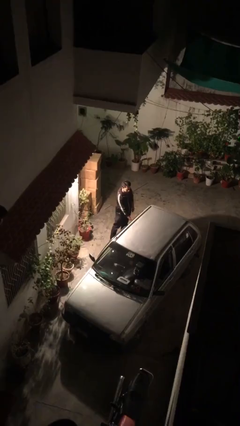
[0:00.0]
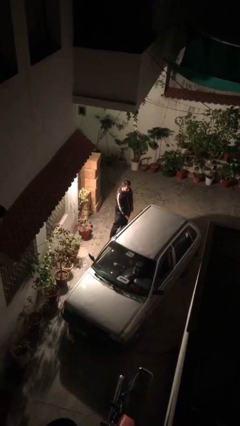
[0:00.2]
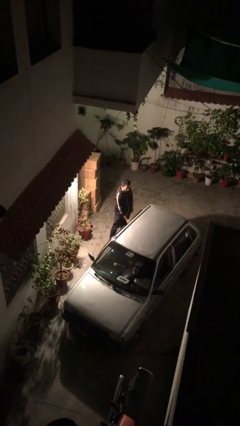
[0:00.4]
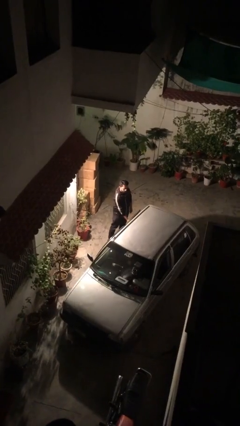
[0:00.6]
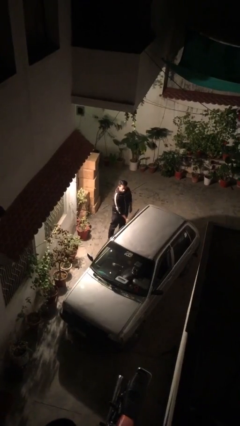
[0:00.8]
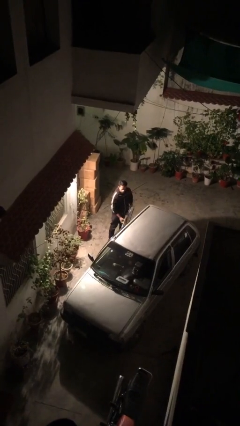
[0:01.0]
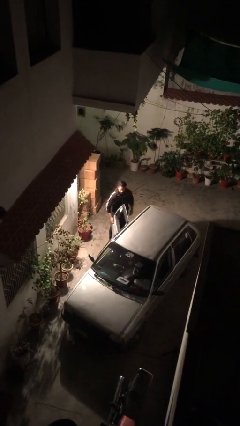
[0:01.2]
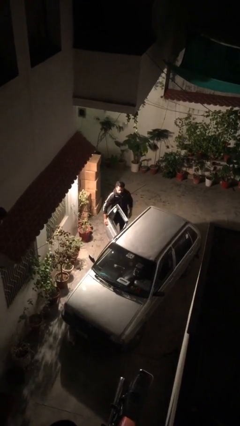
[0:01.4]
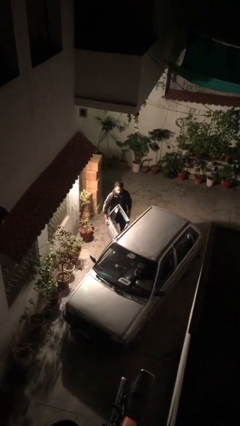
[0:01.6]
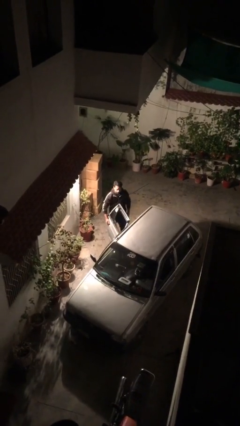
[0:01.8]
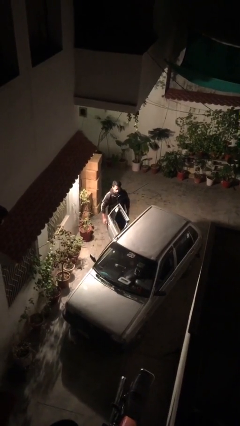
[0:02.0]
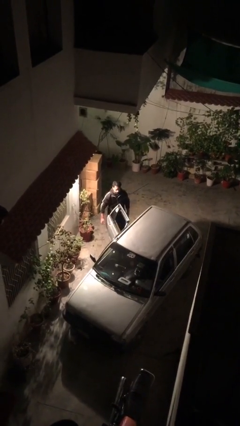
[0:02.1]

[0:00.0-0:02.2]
person opens car door

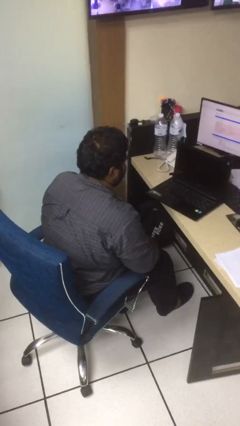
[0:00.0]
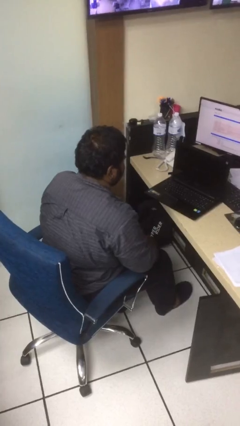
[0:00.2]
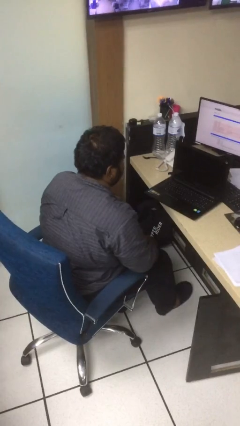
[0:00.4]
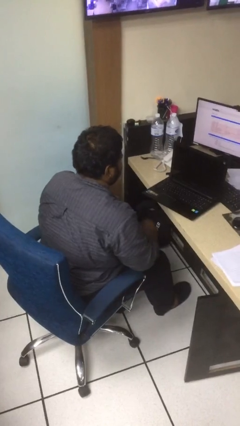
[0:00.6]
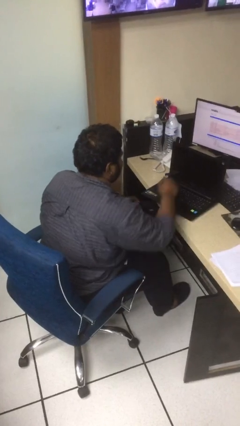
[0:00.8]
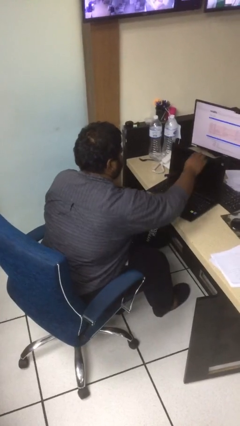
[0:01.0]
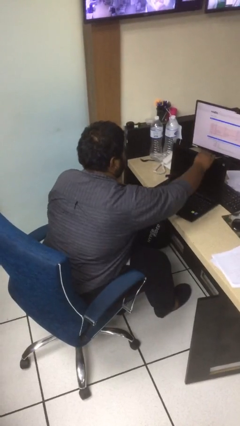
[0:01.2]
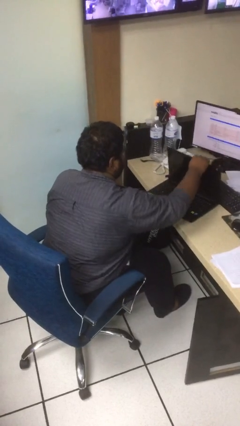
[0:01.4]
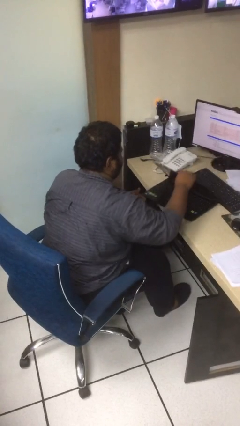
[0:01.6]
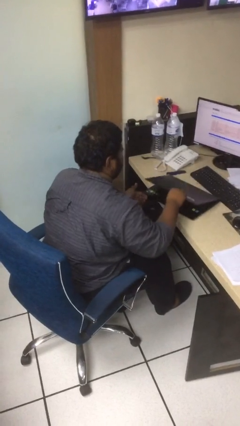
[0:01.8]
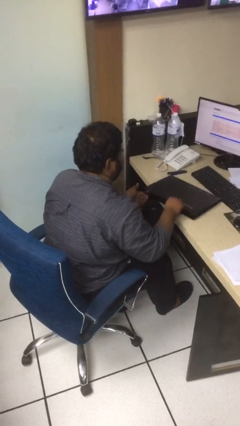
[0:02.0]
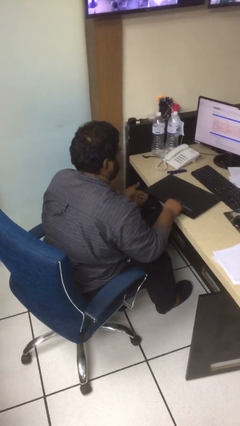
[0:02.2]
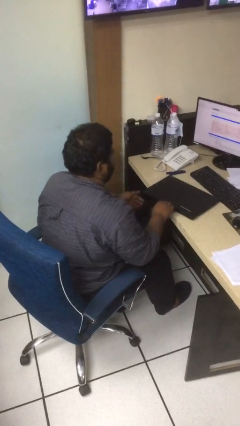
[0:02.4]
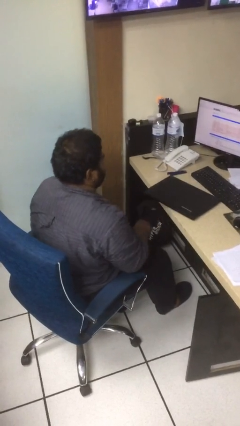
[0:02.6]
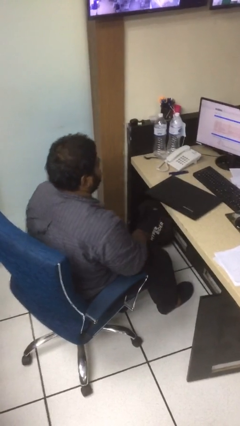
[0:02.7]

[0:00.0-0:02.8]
person closes laptop

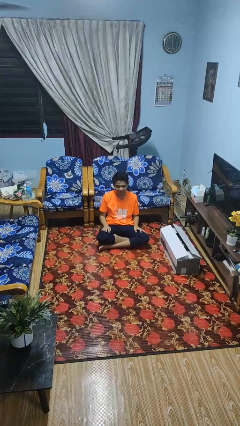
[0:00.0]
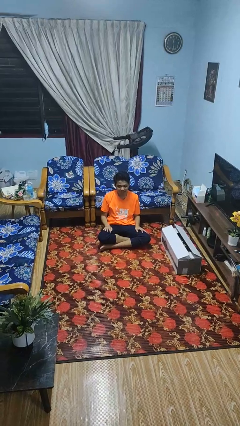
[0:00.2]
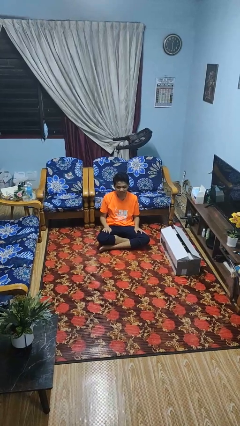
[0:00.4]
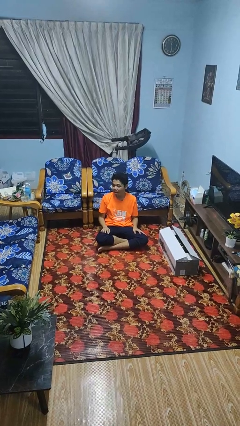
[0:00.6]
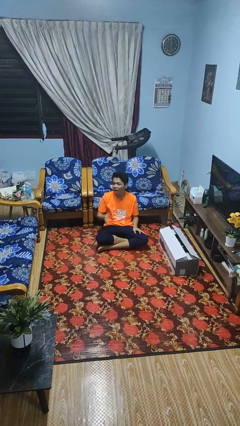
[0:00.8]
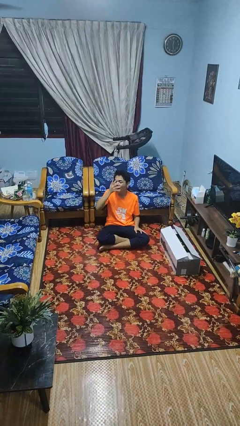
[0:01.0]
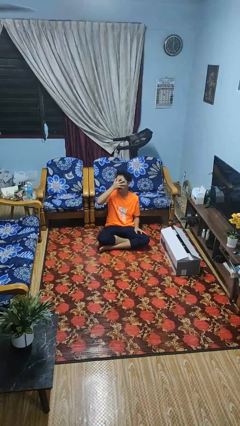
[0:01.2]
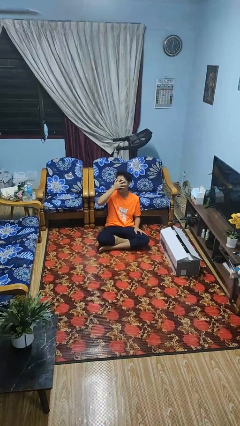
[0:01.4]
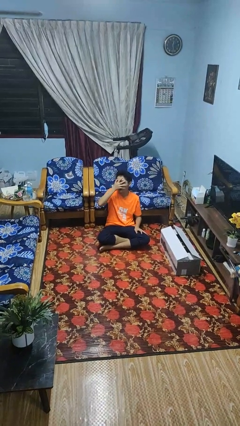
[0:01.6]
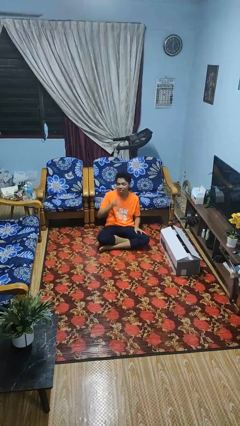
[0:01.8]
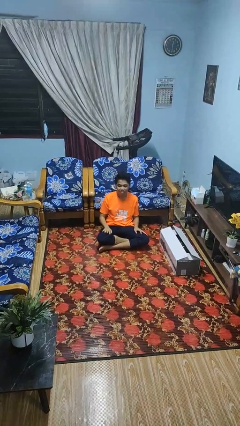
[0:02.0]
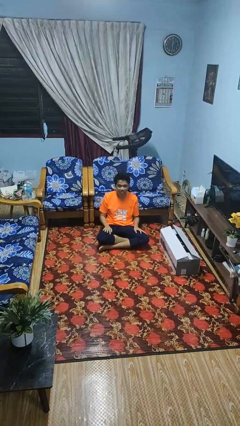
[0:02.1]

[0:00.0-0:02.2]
person covers face with hands

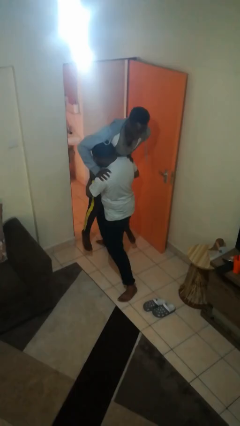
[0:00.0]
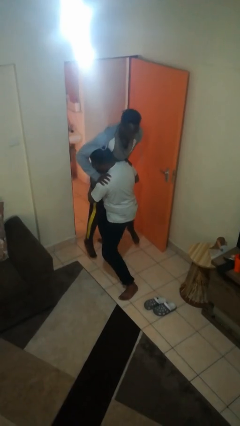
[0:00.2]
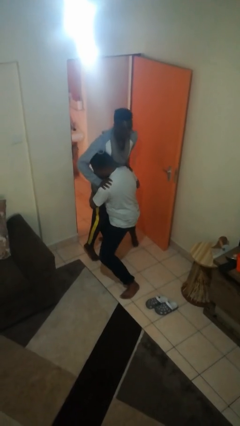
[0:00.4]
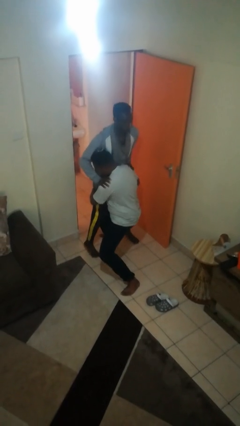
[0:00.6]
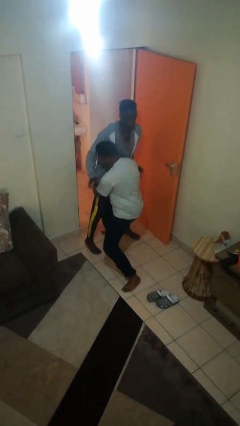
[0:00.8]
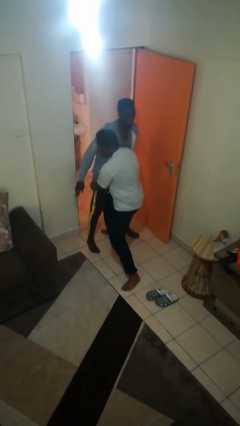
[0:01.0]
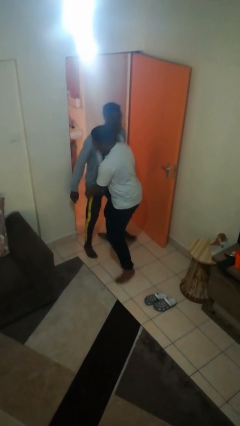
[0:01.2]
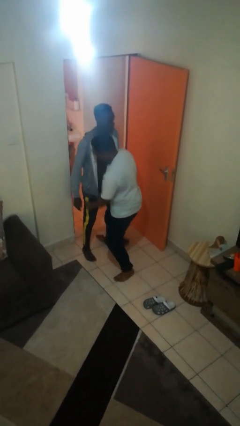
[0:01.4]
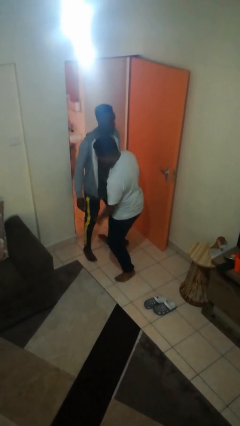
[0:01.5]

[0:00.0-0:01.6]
person puts down person

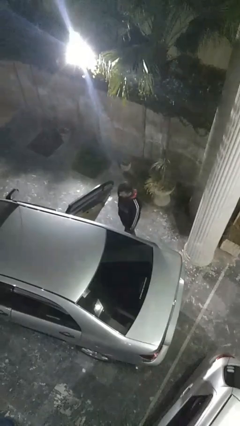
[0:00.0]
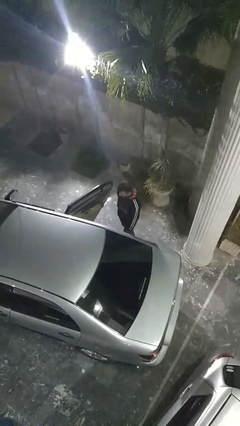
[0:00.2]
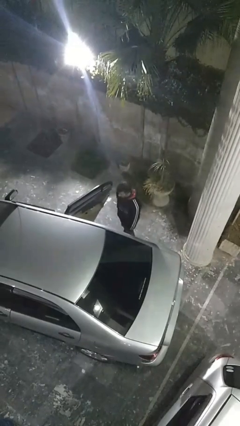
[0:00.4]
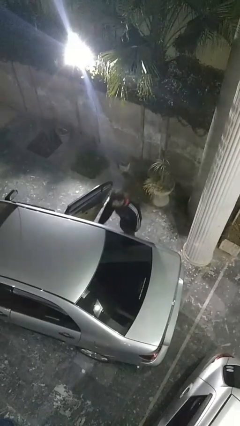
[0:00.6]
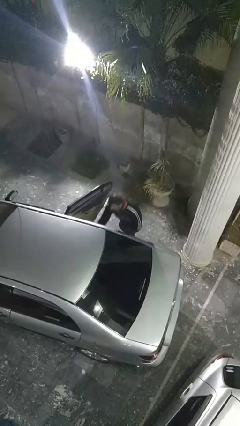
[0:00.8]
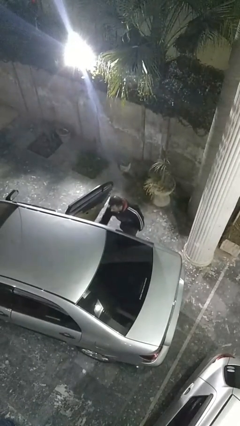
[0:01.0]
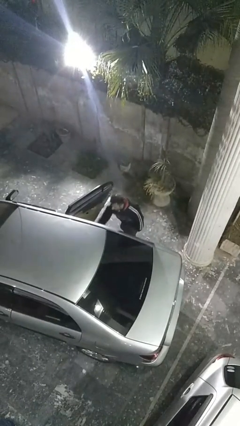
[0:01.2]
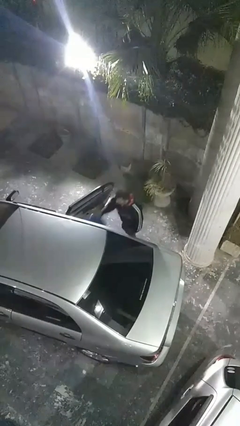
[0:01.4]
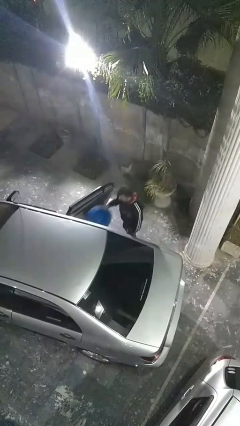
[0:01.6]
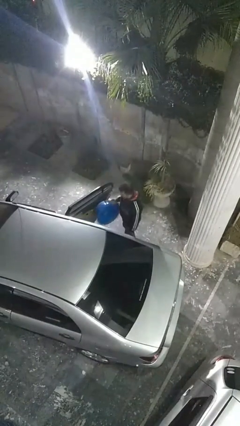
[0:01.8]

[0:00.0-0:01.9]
person unloads car

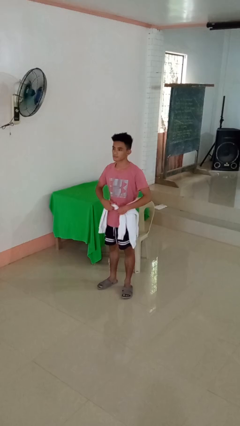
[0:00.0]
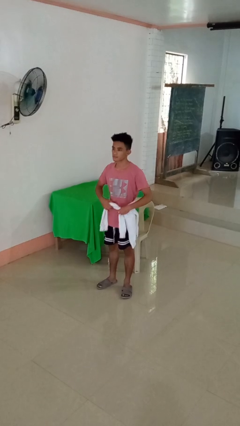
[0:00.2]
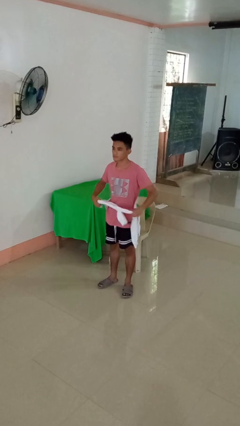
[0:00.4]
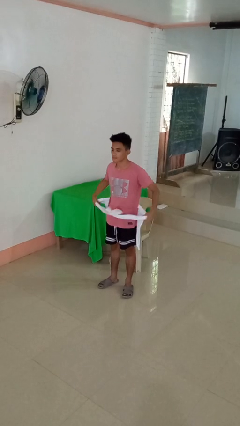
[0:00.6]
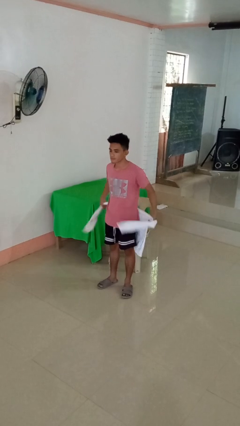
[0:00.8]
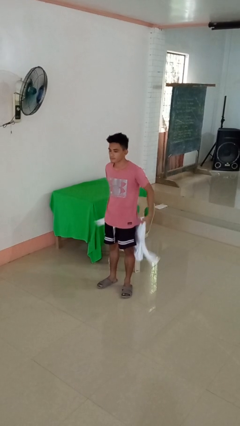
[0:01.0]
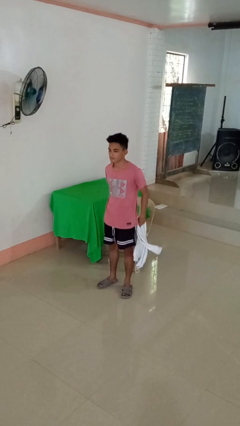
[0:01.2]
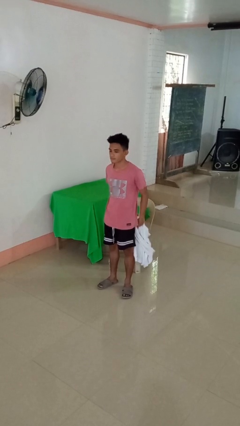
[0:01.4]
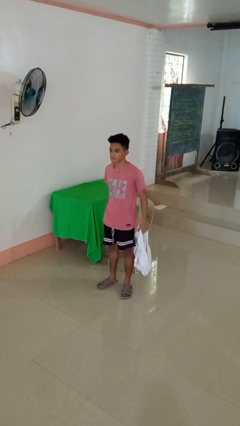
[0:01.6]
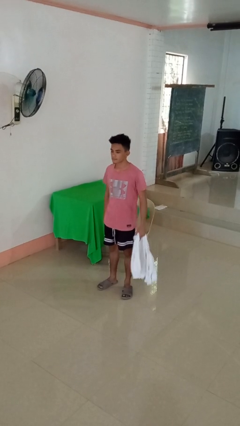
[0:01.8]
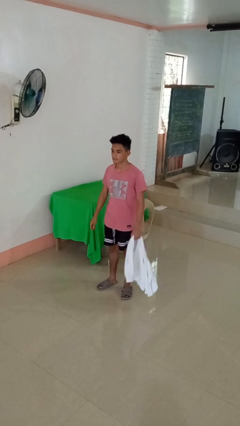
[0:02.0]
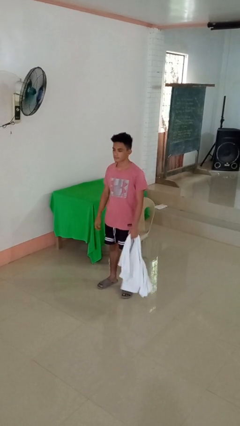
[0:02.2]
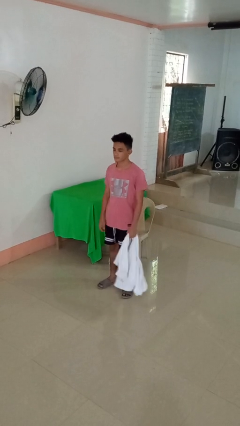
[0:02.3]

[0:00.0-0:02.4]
person unties jacket around waist

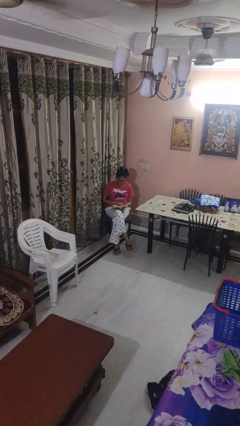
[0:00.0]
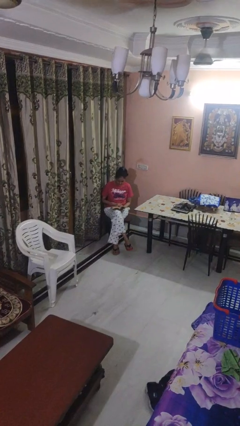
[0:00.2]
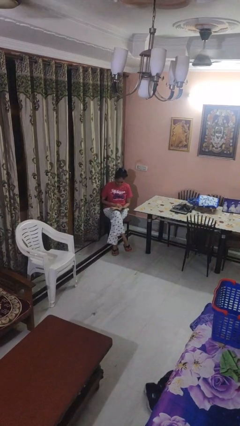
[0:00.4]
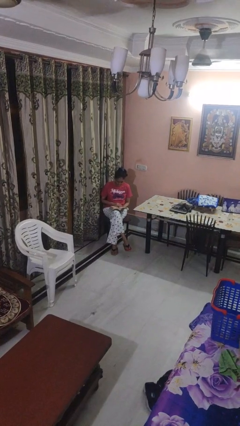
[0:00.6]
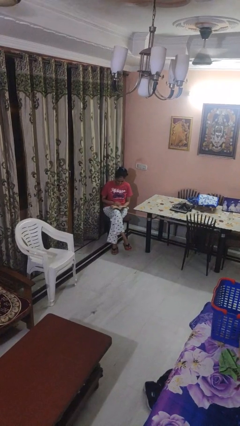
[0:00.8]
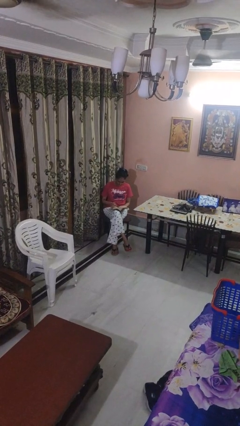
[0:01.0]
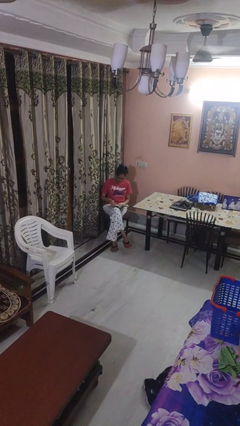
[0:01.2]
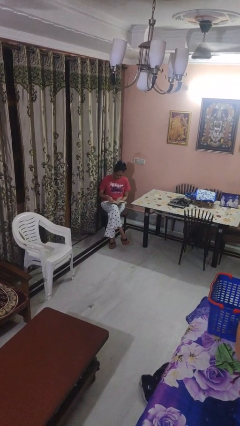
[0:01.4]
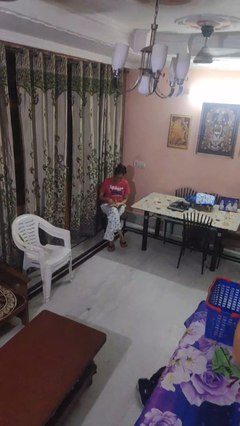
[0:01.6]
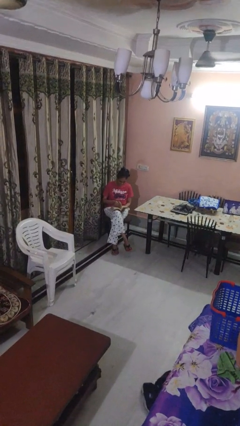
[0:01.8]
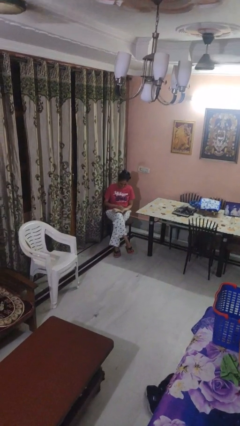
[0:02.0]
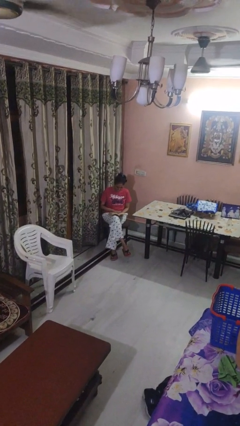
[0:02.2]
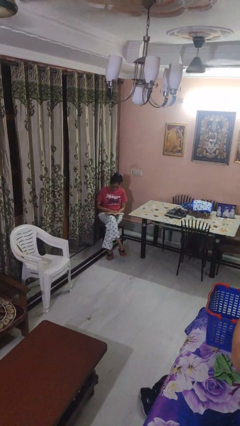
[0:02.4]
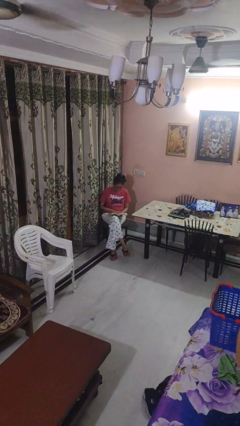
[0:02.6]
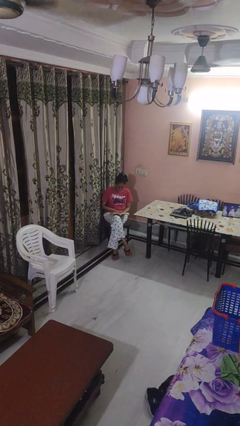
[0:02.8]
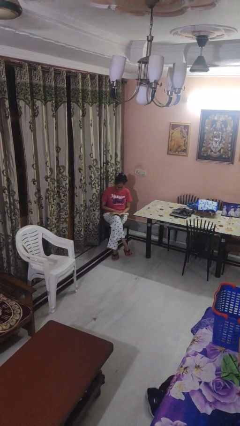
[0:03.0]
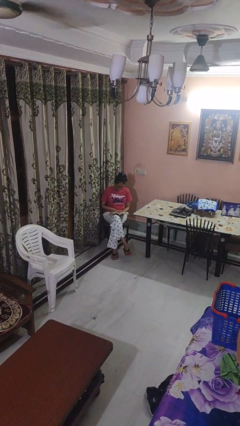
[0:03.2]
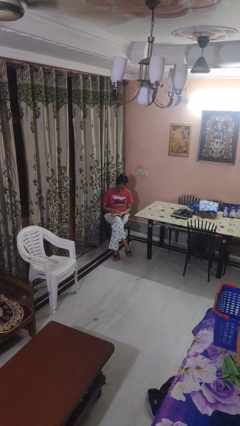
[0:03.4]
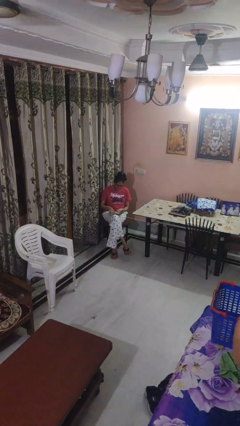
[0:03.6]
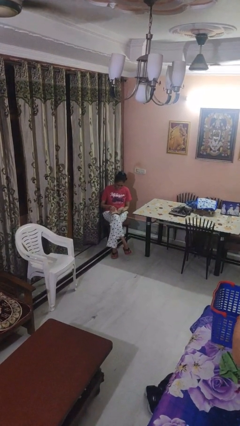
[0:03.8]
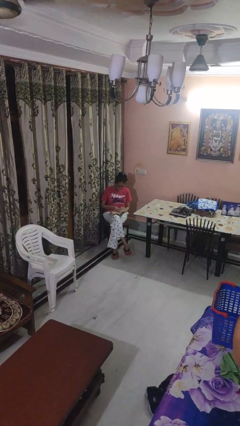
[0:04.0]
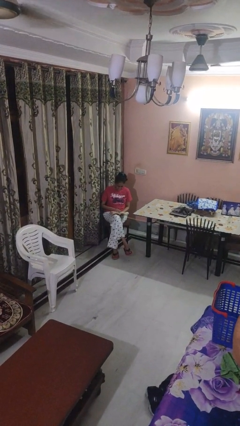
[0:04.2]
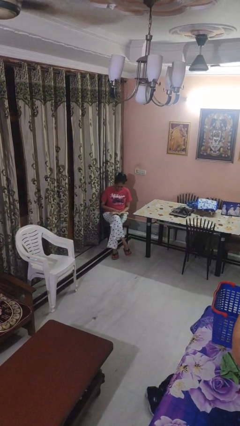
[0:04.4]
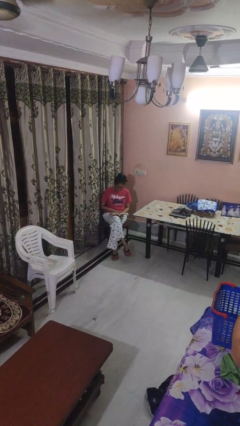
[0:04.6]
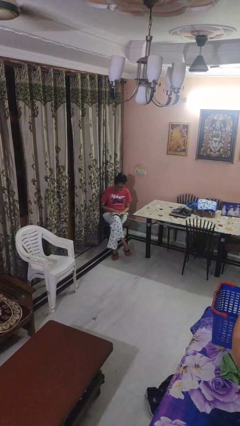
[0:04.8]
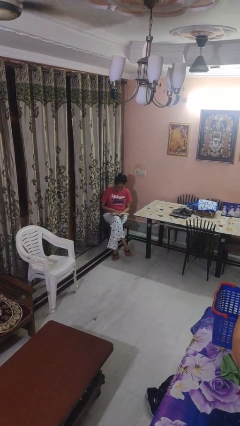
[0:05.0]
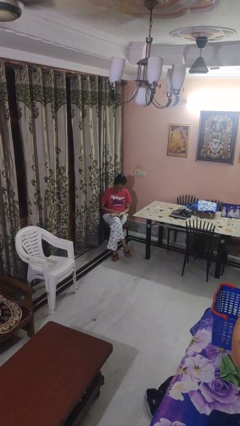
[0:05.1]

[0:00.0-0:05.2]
person reads book
